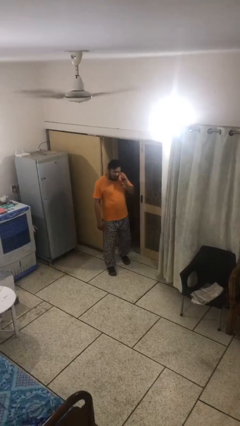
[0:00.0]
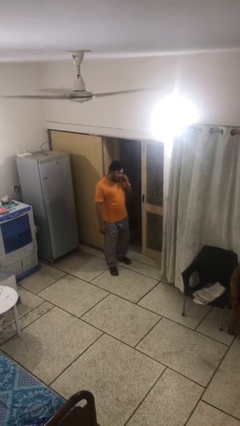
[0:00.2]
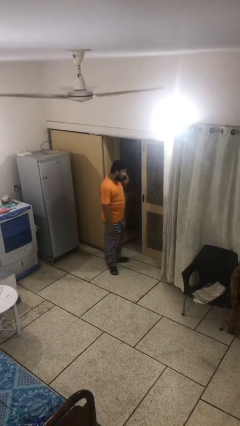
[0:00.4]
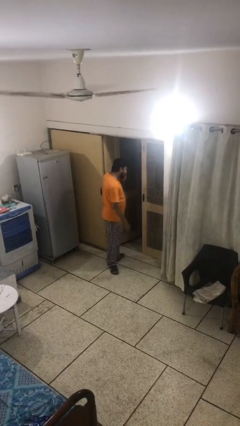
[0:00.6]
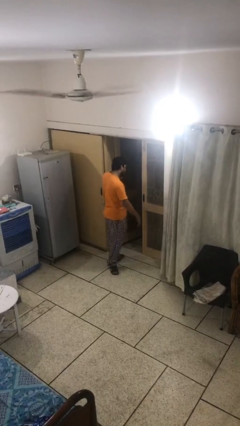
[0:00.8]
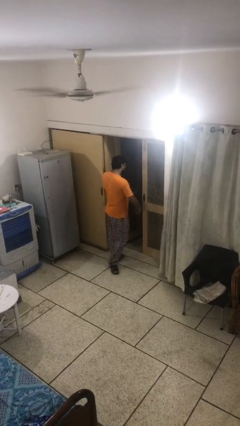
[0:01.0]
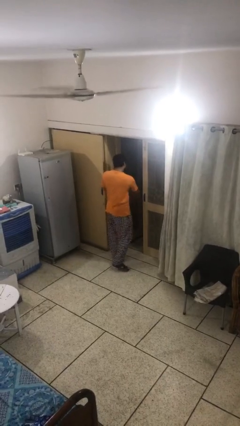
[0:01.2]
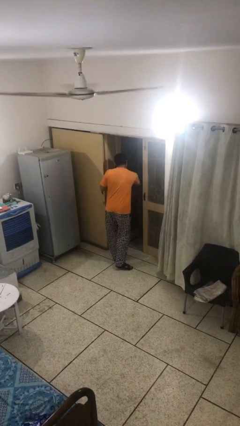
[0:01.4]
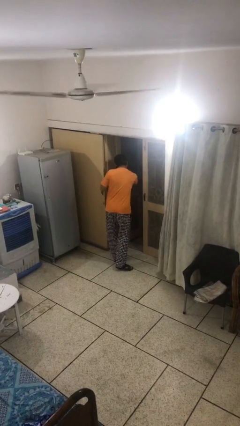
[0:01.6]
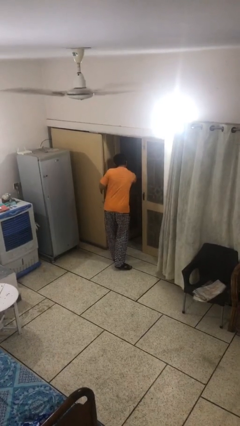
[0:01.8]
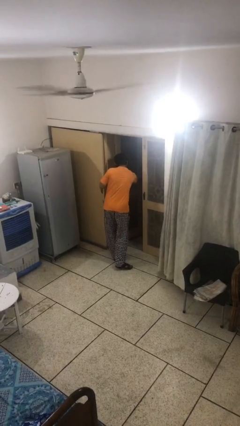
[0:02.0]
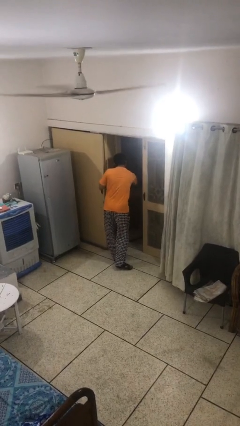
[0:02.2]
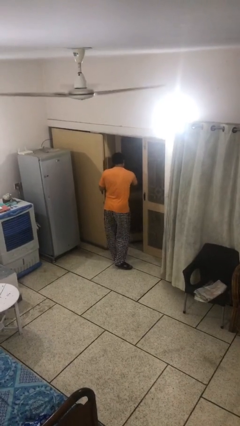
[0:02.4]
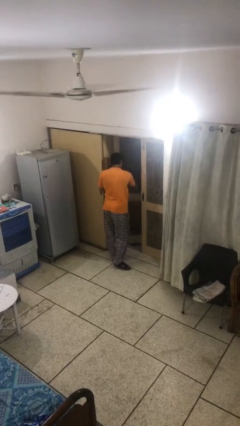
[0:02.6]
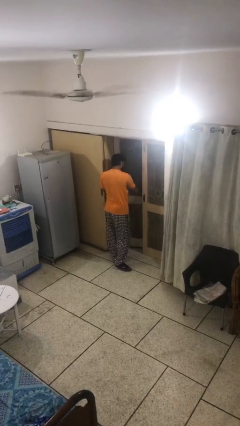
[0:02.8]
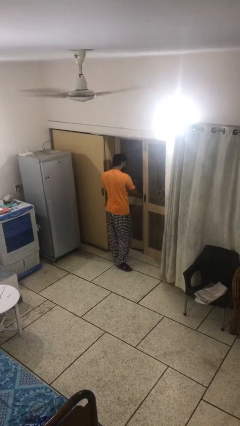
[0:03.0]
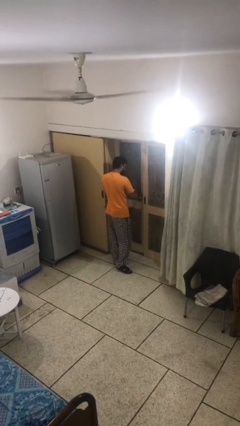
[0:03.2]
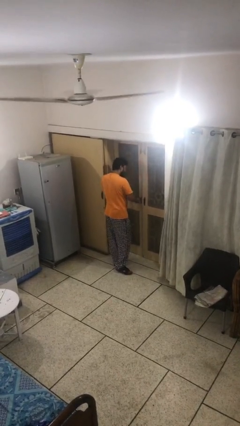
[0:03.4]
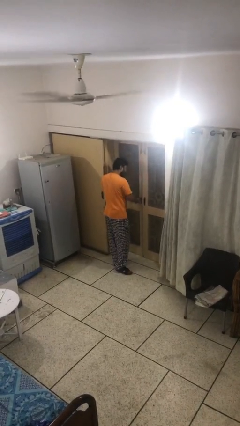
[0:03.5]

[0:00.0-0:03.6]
person closes facility door

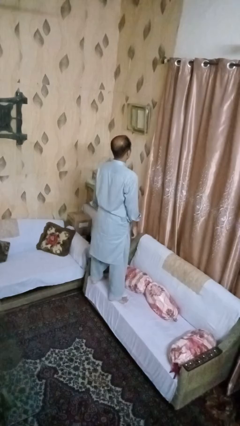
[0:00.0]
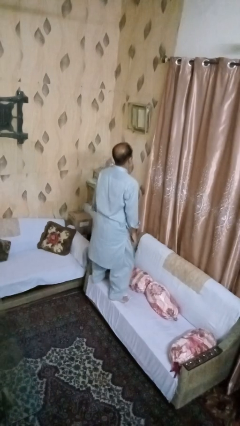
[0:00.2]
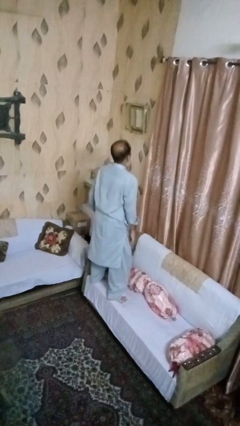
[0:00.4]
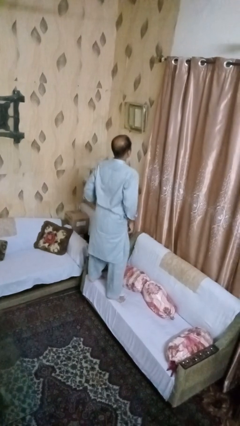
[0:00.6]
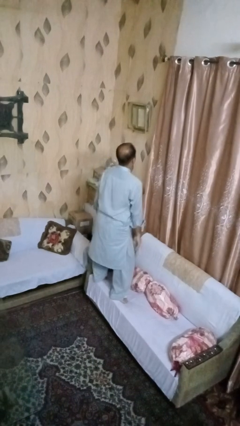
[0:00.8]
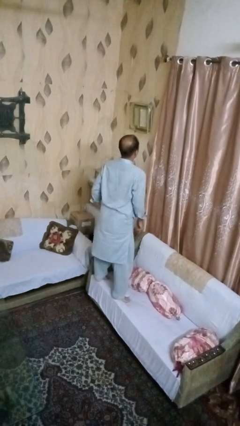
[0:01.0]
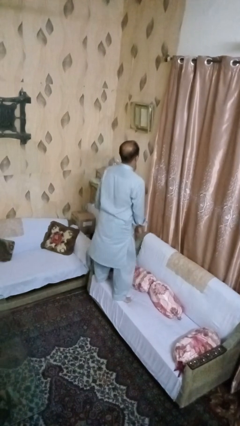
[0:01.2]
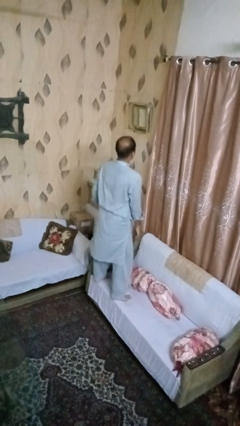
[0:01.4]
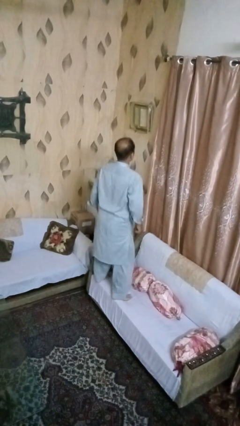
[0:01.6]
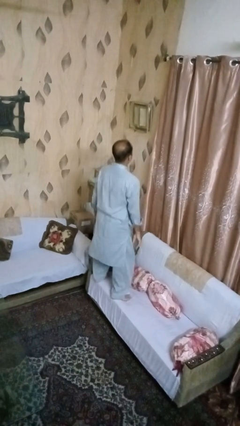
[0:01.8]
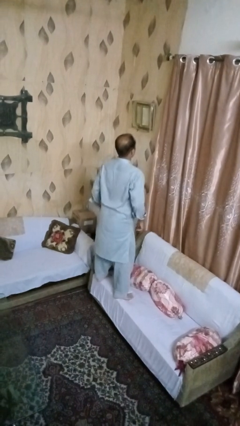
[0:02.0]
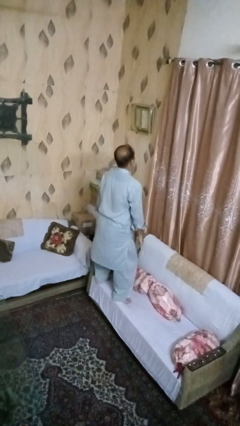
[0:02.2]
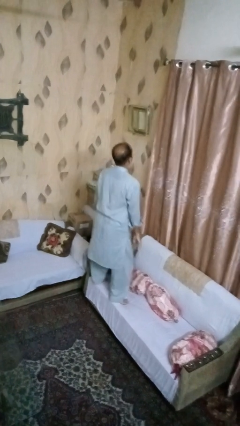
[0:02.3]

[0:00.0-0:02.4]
person jumps on couch

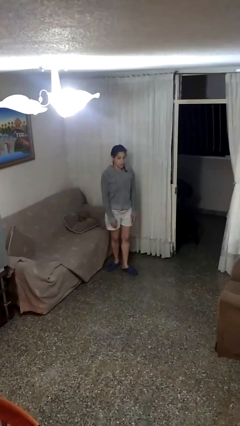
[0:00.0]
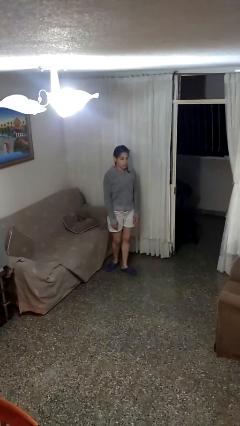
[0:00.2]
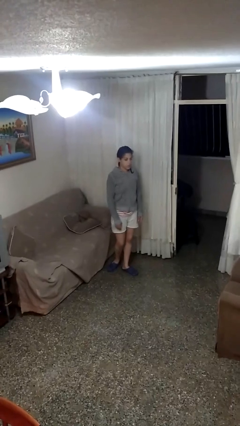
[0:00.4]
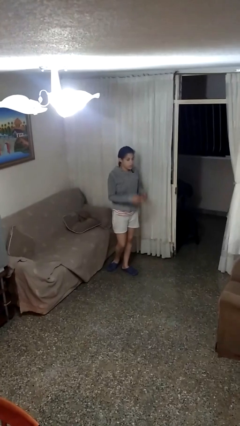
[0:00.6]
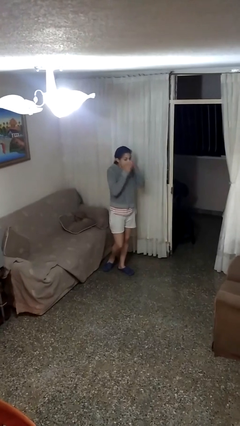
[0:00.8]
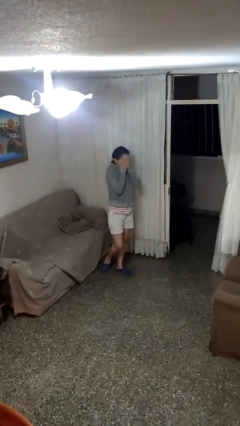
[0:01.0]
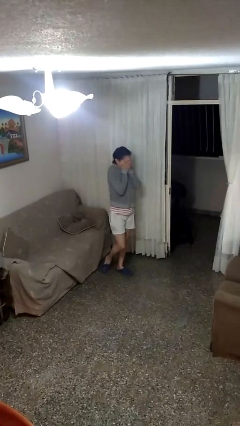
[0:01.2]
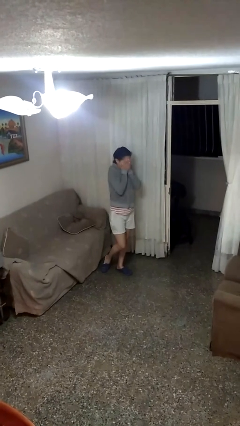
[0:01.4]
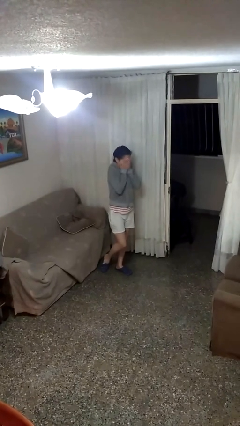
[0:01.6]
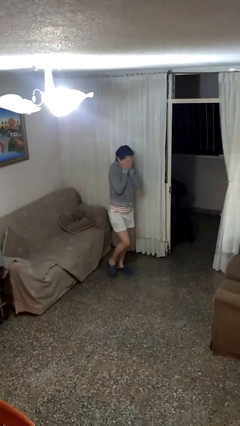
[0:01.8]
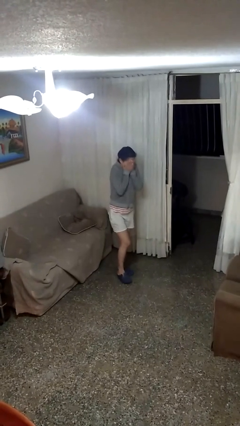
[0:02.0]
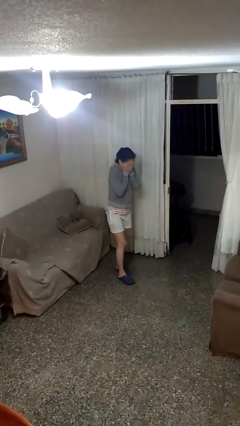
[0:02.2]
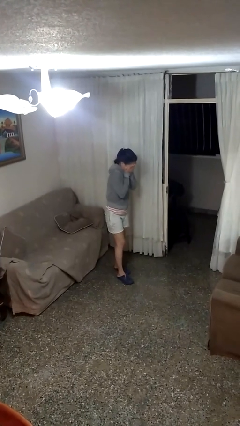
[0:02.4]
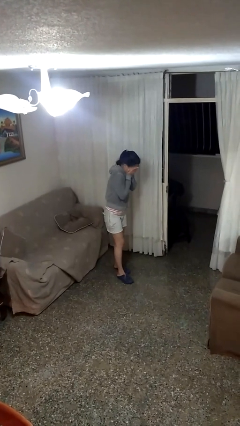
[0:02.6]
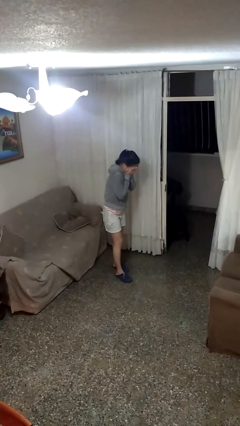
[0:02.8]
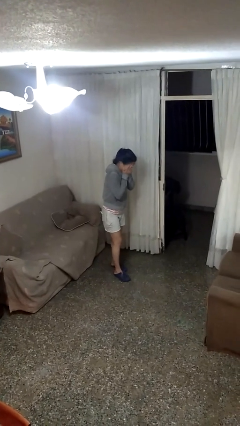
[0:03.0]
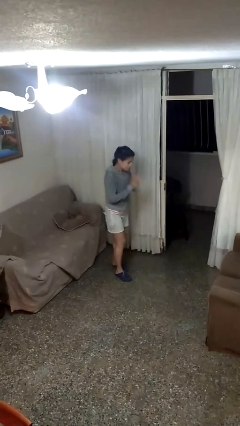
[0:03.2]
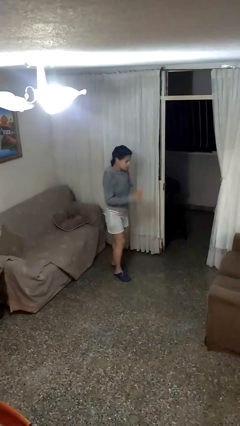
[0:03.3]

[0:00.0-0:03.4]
person covers face with hands

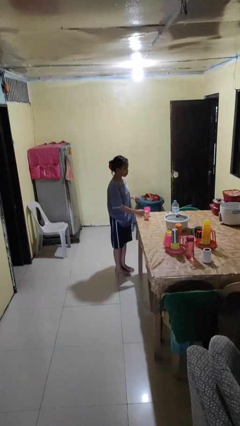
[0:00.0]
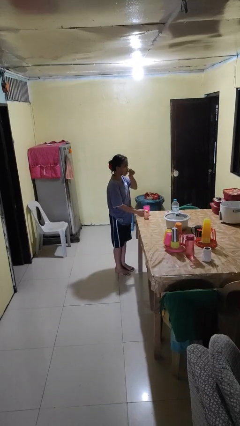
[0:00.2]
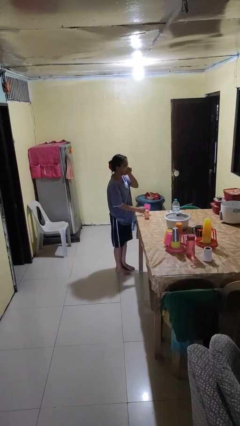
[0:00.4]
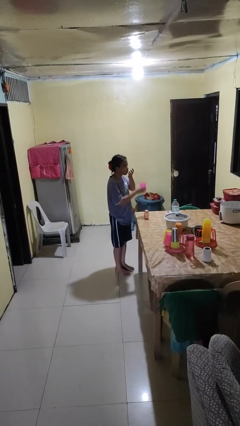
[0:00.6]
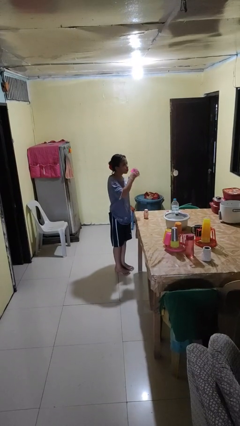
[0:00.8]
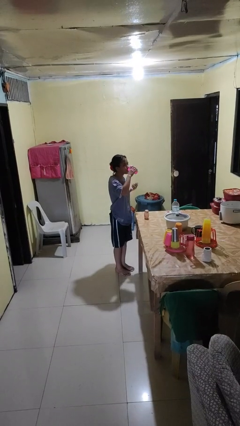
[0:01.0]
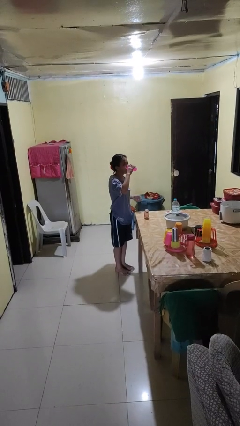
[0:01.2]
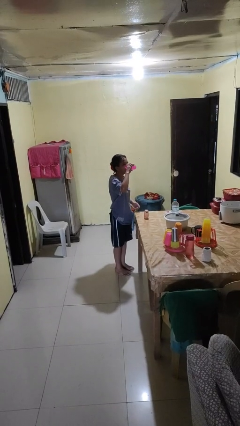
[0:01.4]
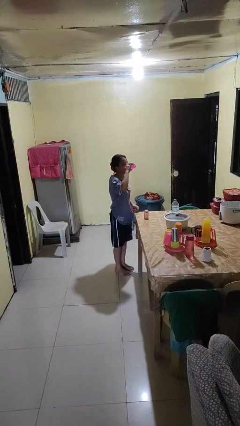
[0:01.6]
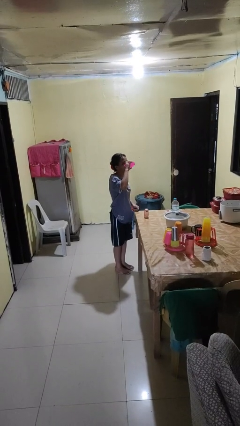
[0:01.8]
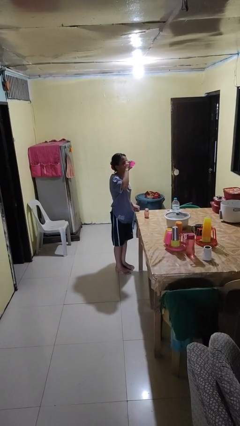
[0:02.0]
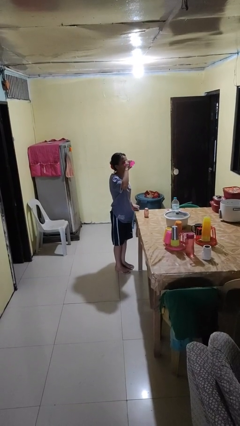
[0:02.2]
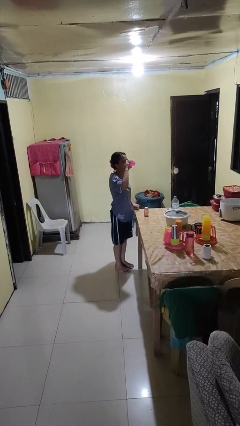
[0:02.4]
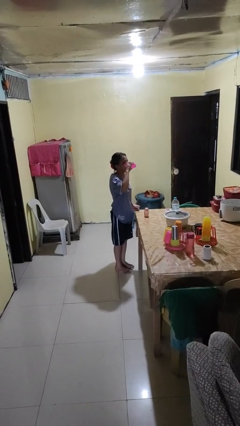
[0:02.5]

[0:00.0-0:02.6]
person drinks from cup

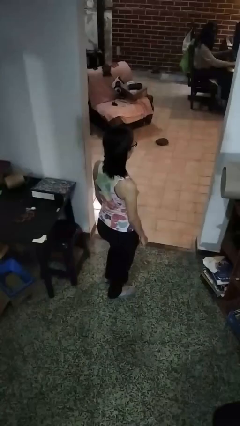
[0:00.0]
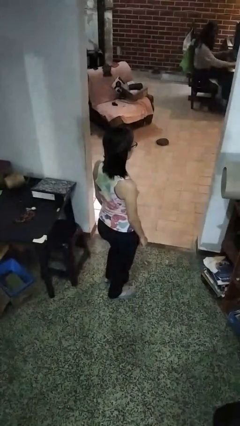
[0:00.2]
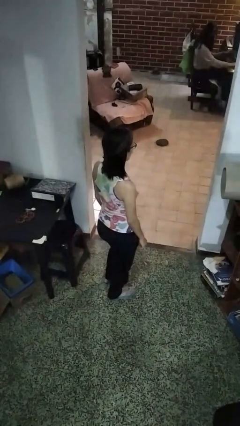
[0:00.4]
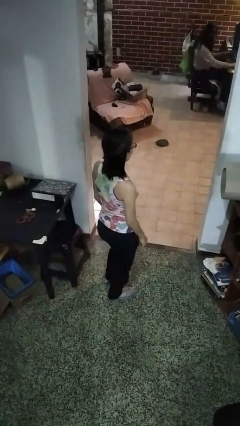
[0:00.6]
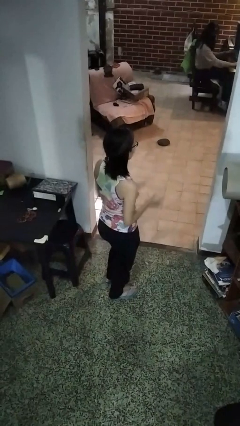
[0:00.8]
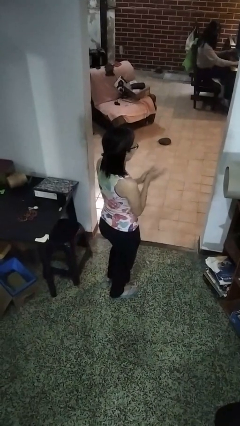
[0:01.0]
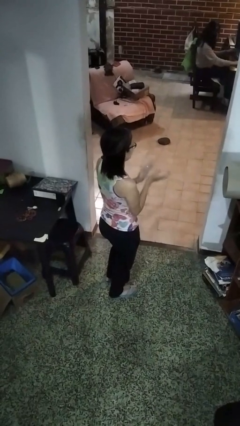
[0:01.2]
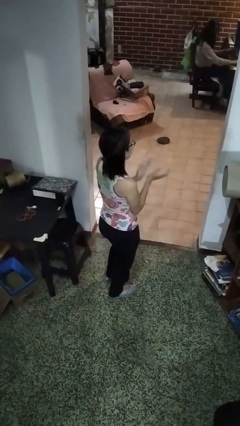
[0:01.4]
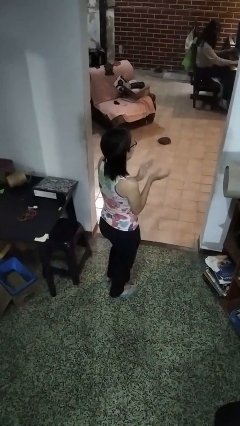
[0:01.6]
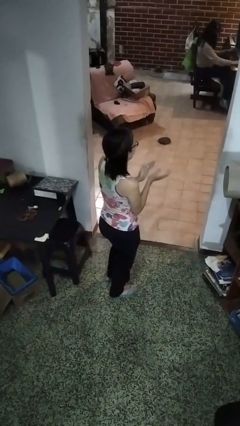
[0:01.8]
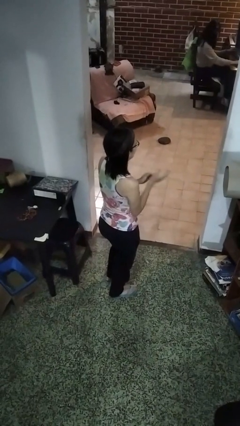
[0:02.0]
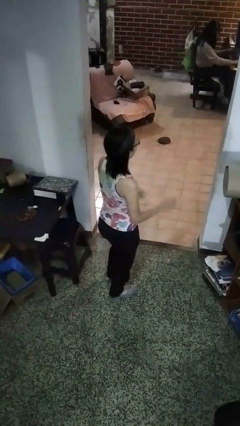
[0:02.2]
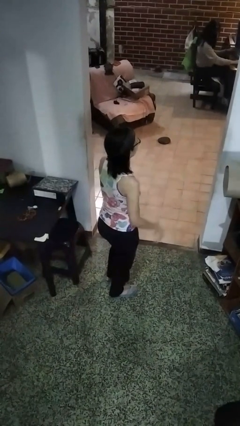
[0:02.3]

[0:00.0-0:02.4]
person claps hands

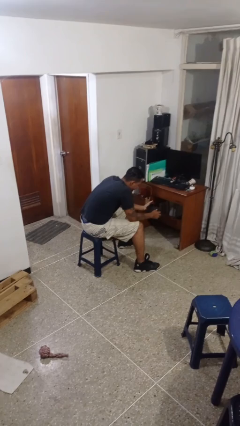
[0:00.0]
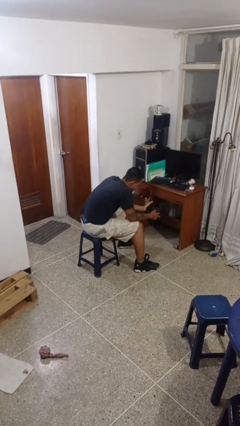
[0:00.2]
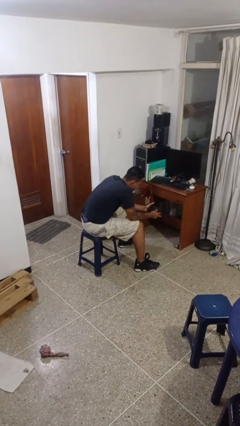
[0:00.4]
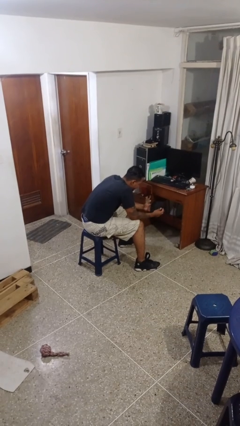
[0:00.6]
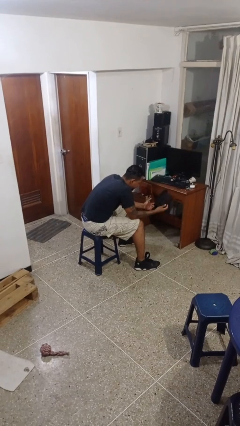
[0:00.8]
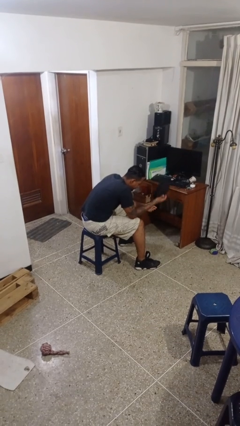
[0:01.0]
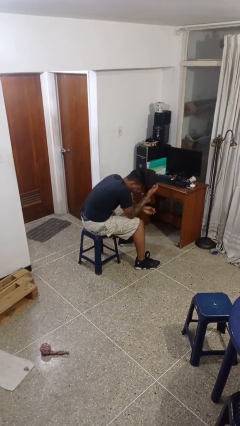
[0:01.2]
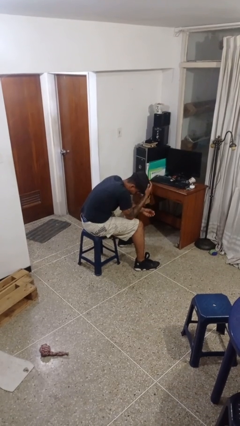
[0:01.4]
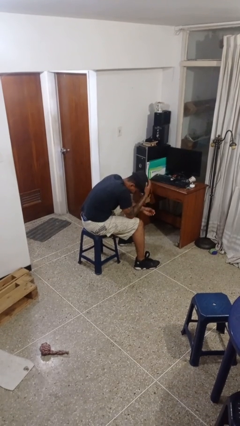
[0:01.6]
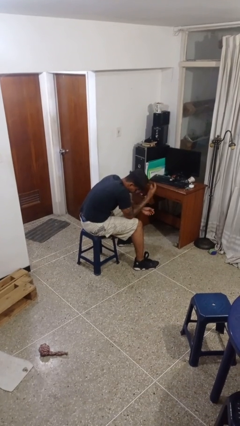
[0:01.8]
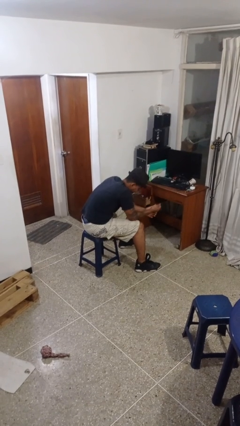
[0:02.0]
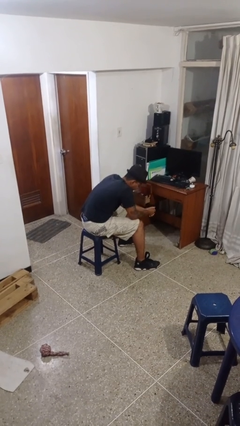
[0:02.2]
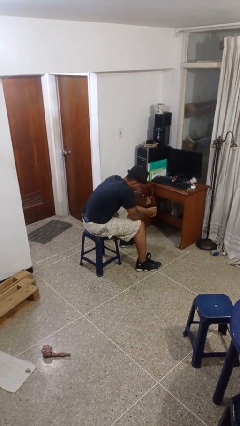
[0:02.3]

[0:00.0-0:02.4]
person puts on hat

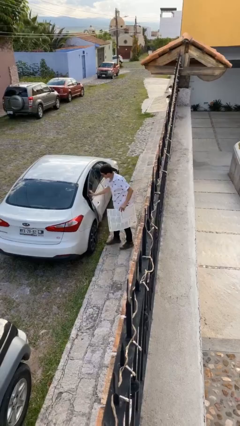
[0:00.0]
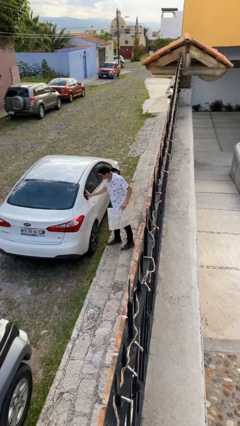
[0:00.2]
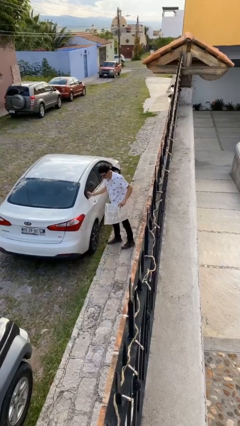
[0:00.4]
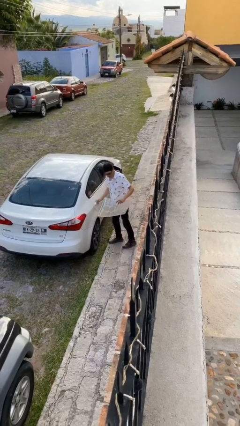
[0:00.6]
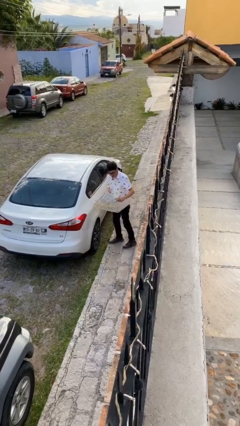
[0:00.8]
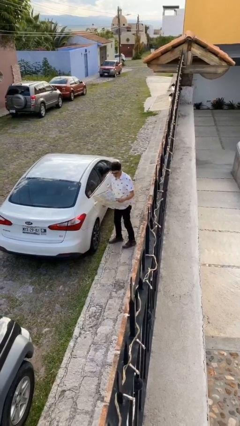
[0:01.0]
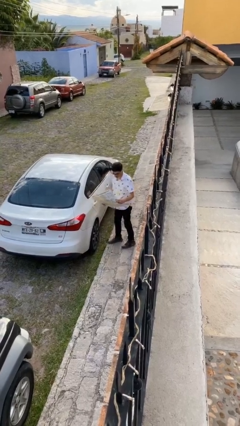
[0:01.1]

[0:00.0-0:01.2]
person closes car door
